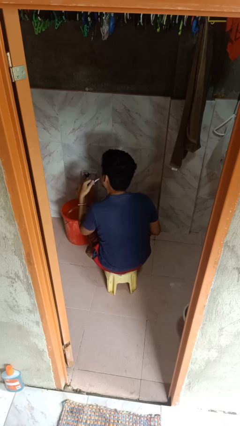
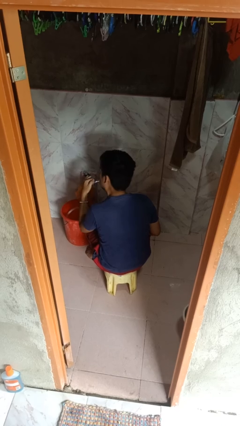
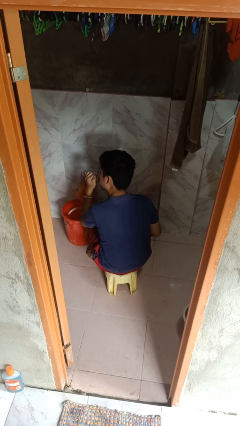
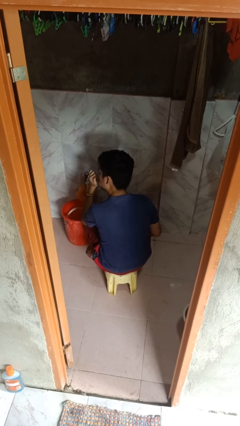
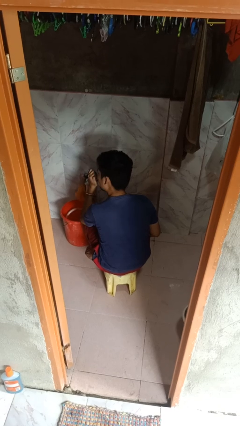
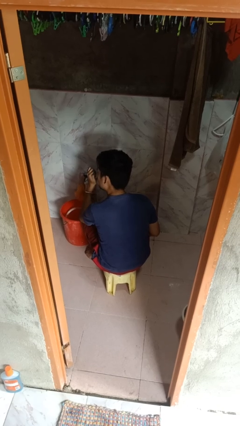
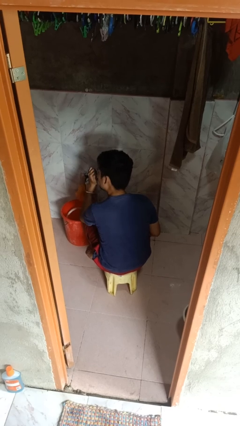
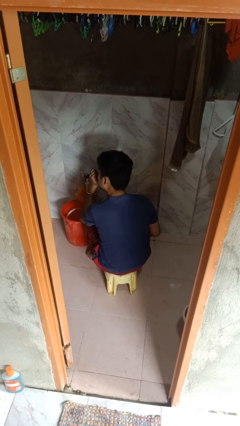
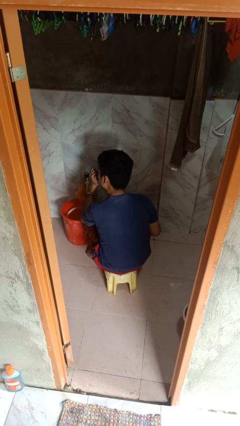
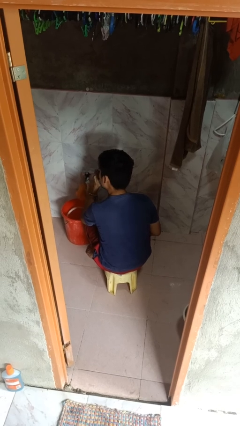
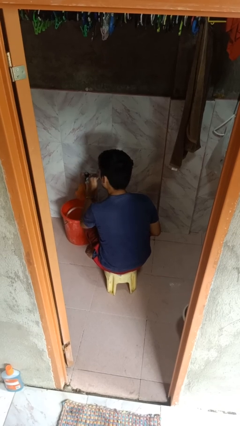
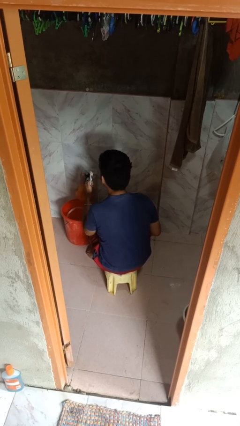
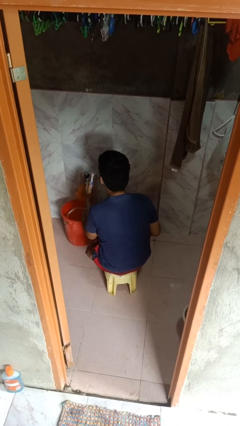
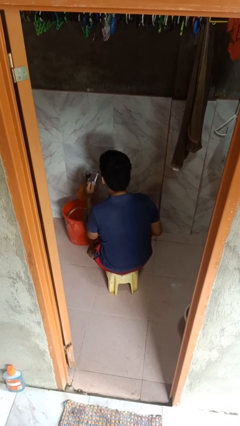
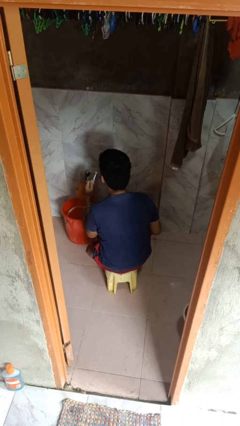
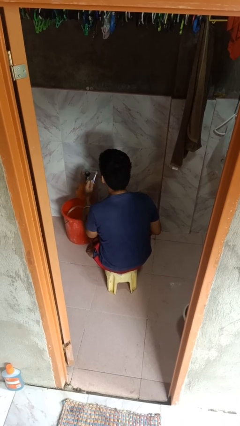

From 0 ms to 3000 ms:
person brushes teeth

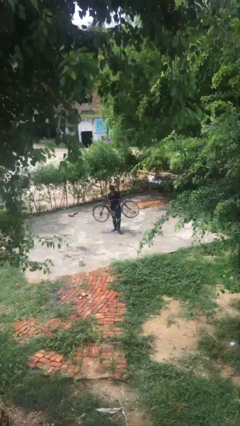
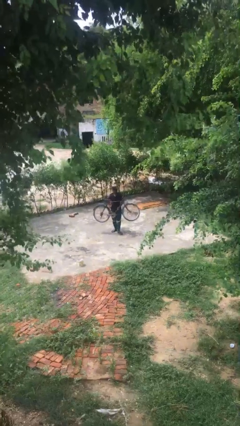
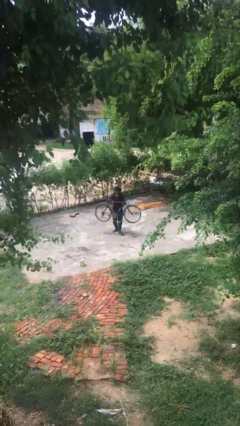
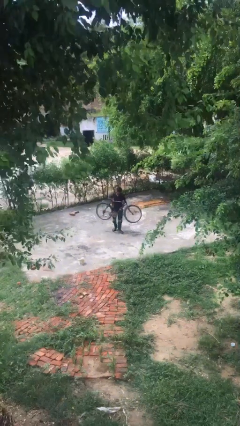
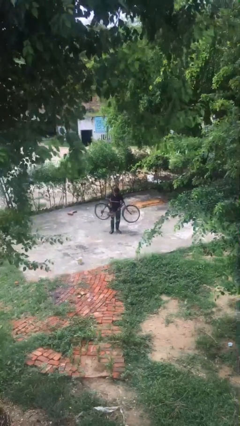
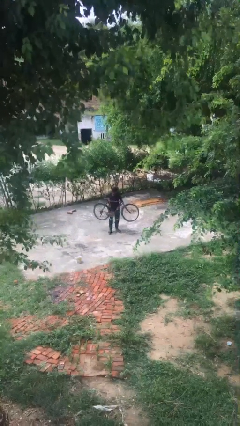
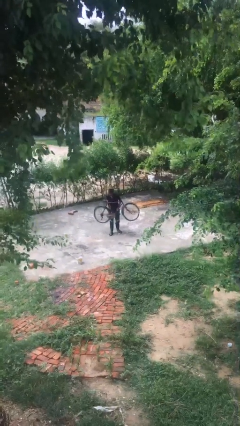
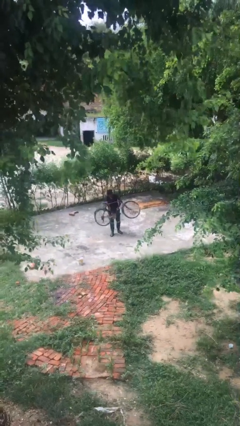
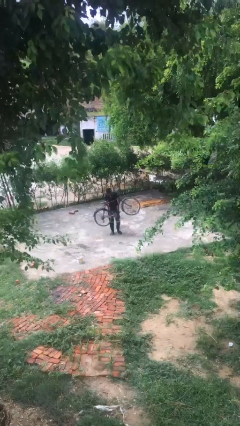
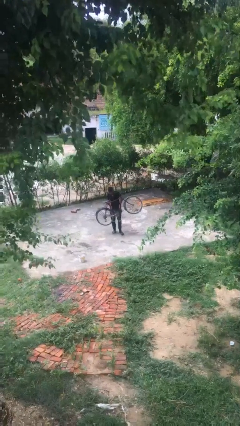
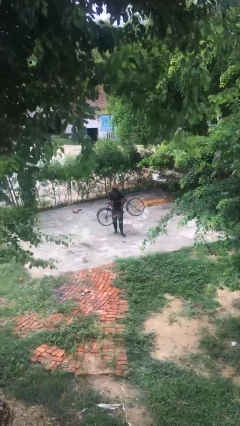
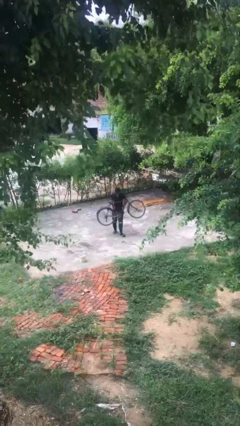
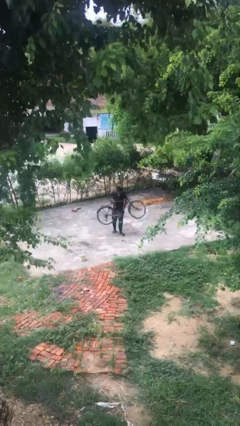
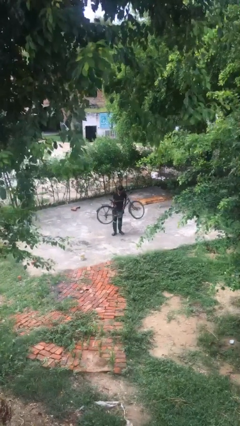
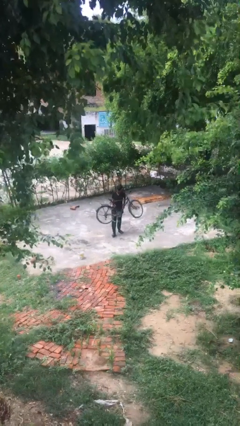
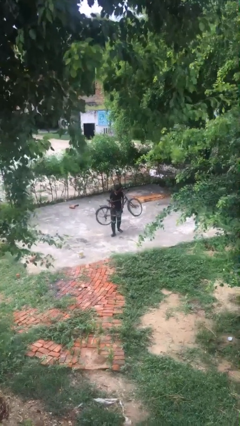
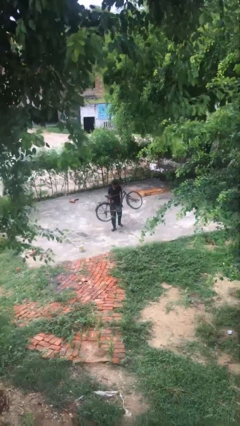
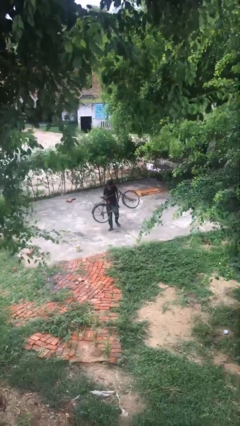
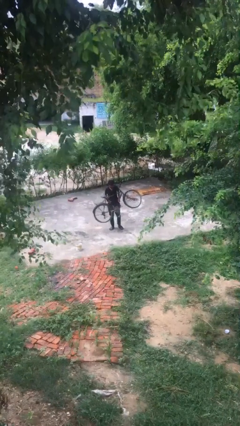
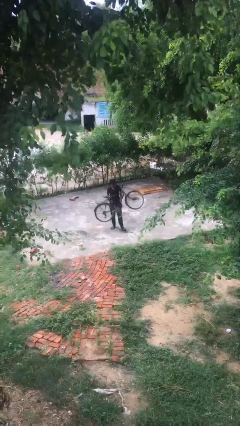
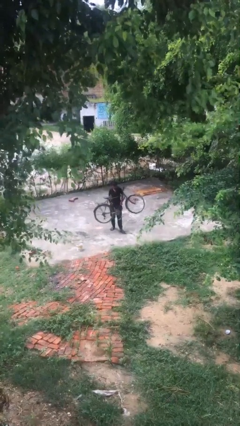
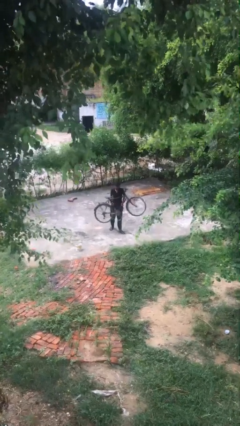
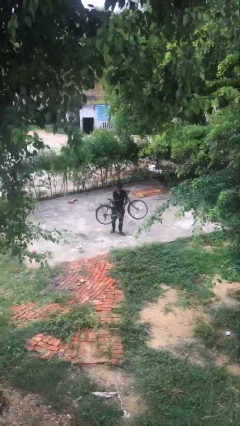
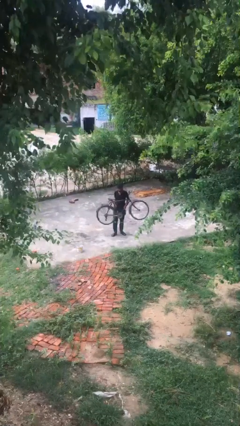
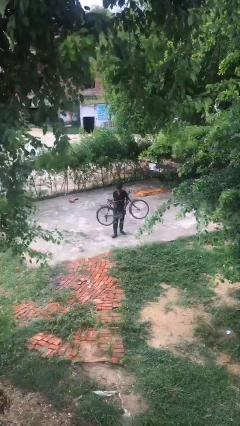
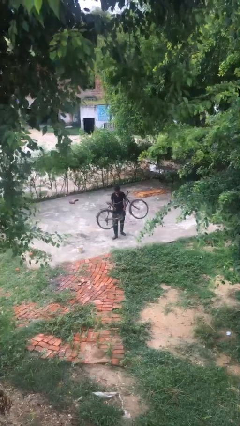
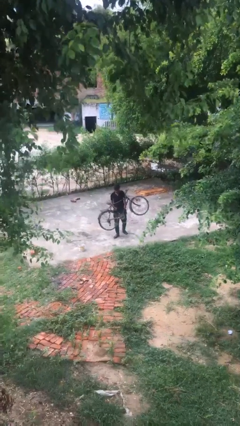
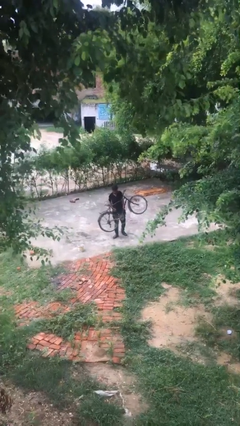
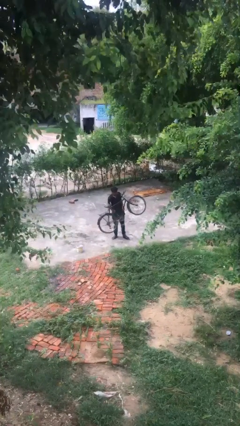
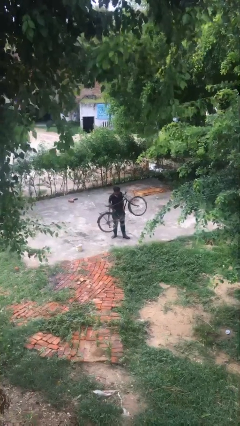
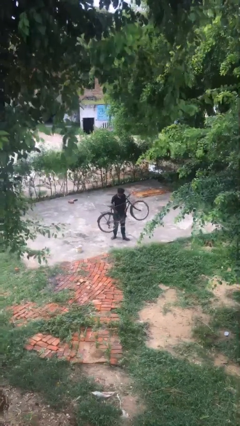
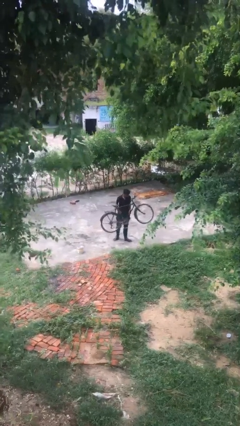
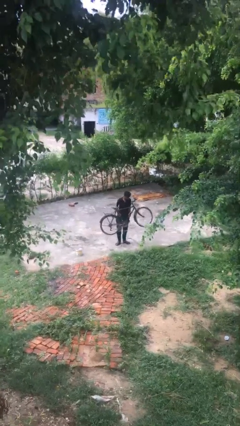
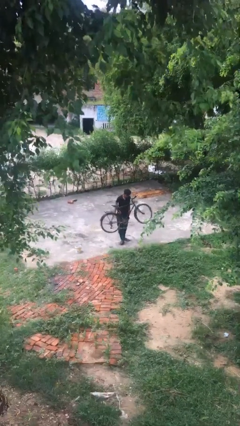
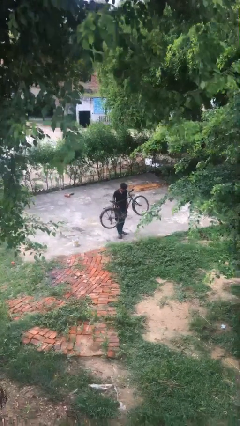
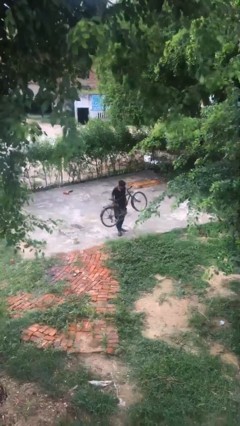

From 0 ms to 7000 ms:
person carries heavy object

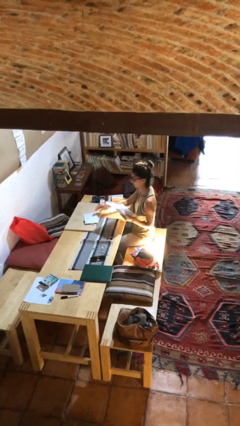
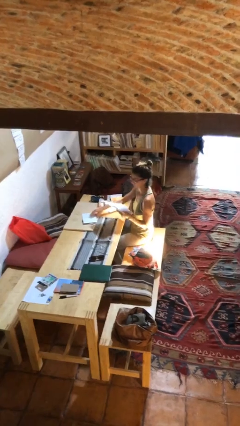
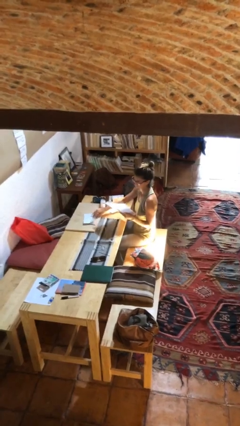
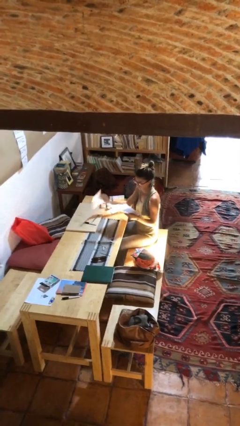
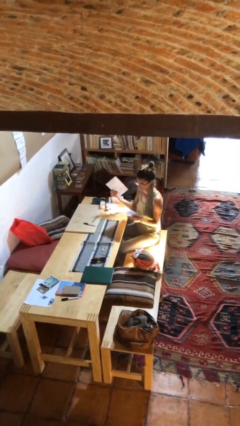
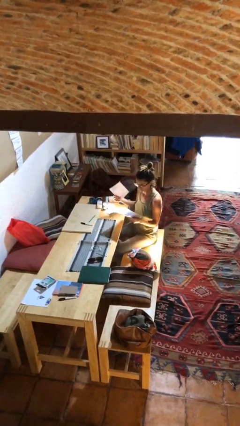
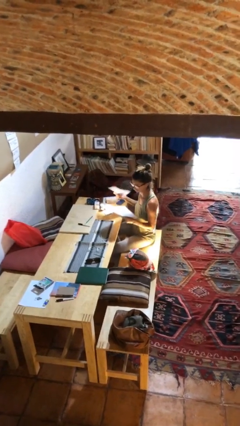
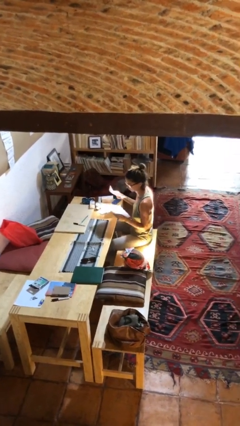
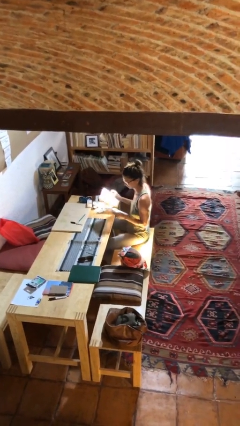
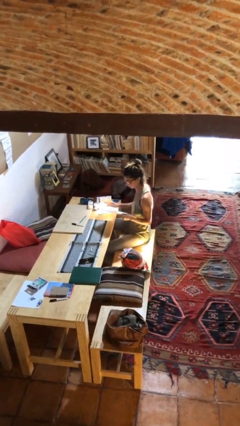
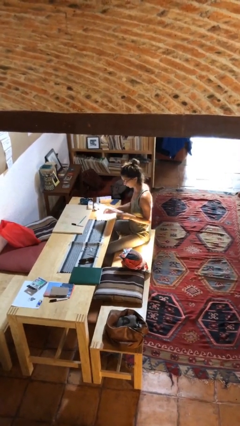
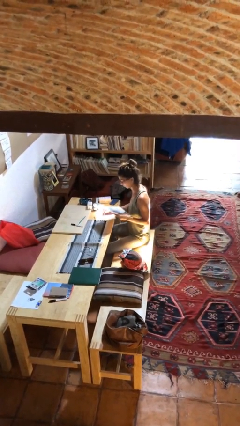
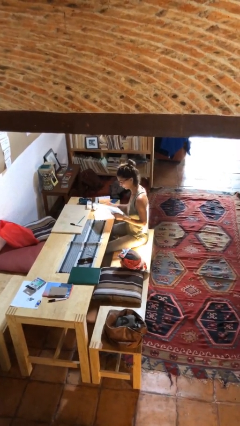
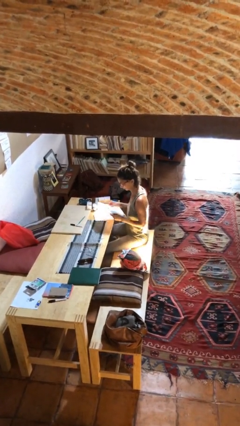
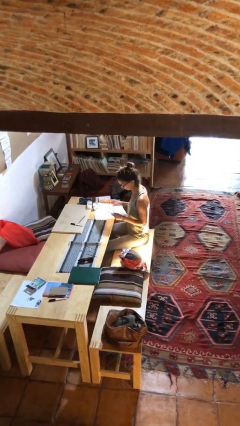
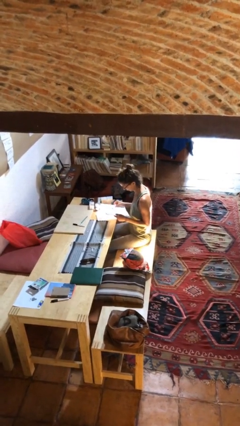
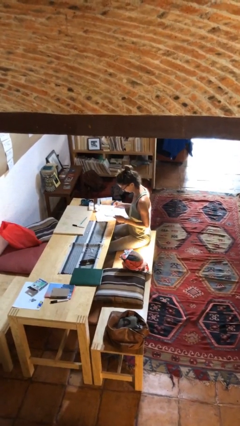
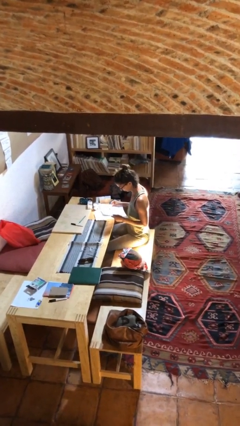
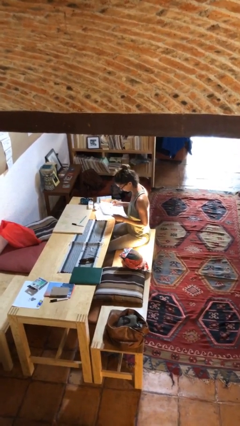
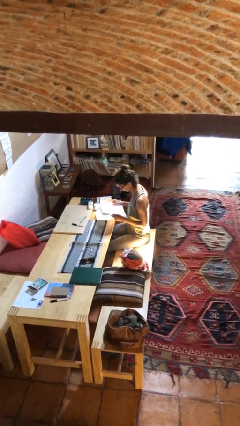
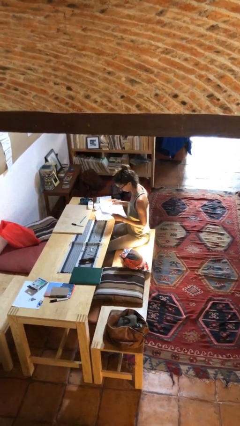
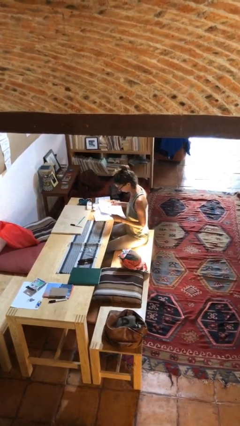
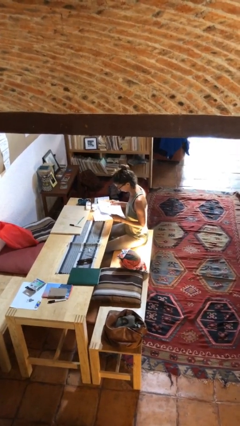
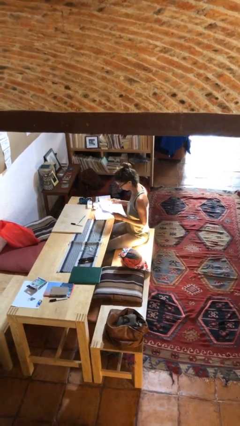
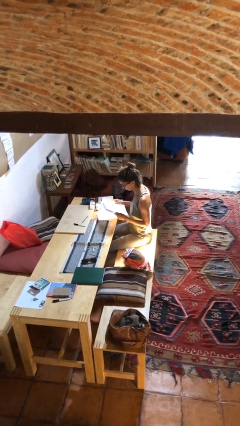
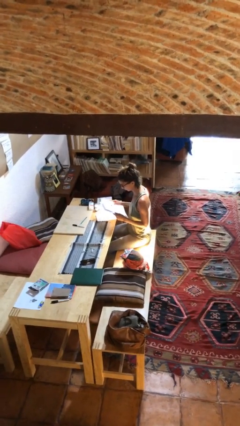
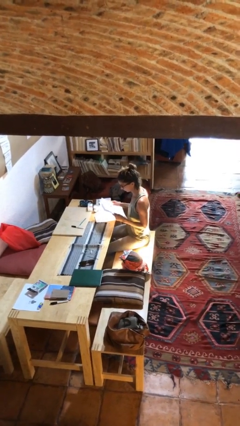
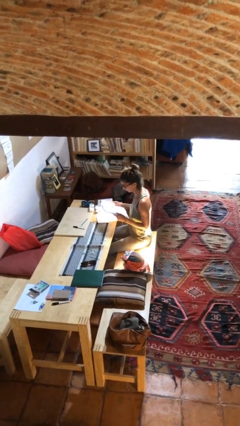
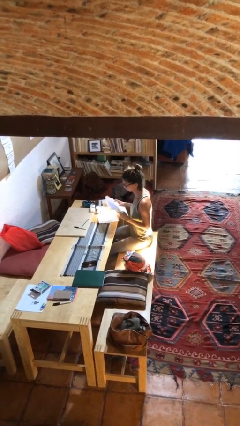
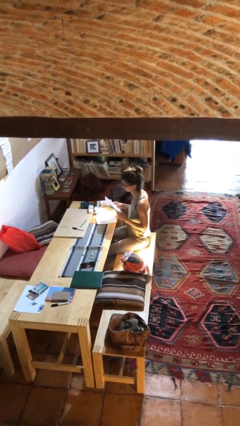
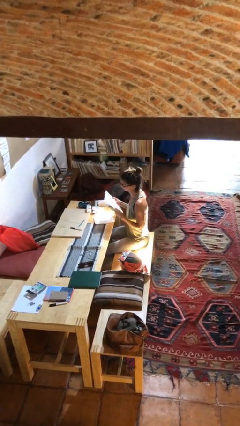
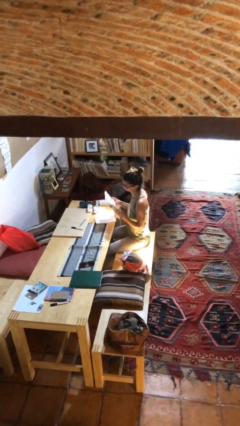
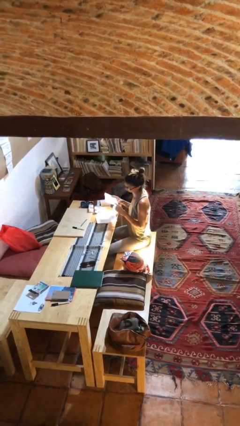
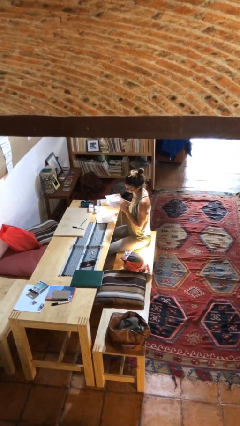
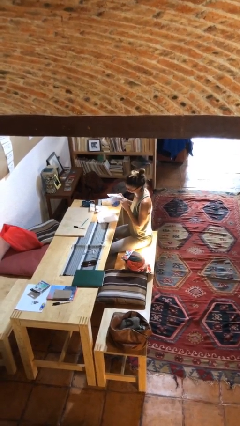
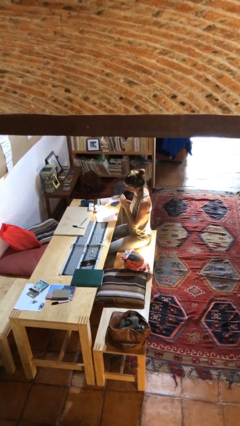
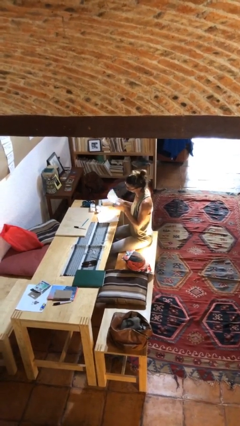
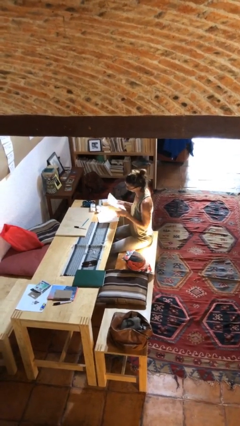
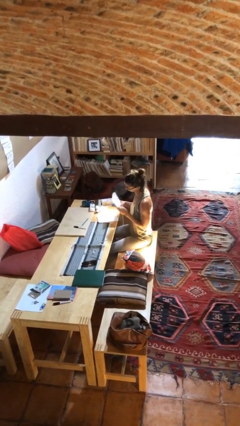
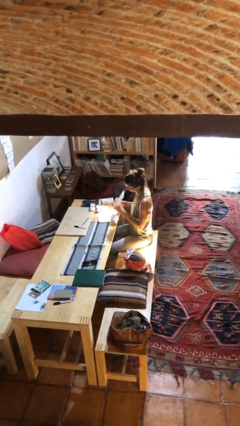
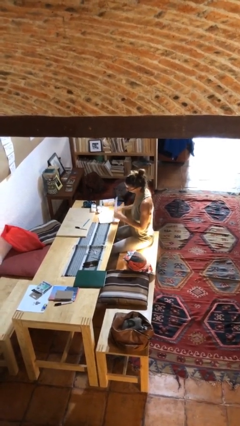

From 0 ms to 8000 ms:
person reads document

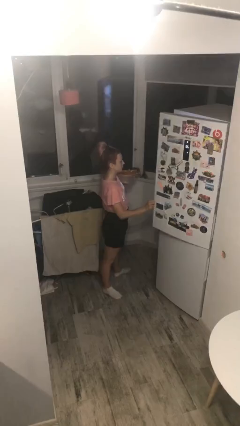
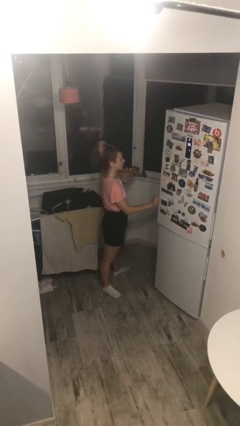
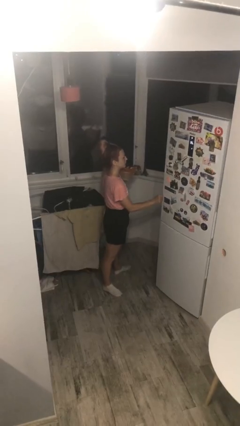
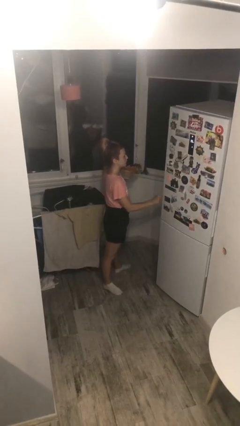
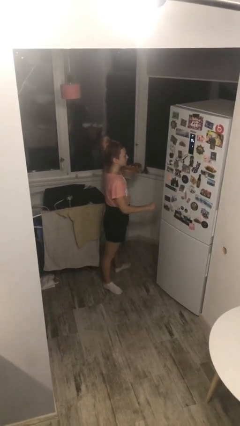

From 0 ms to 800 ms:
person closes refrigerator
